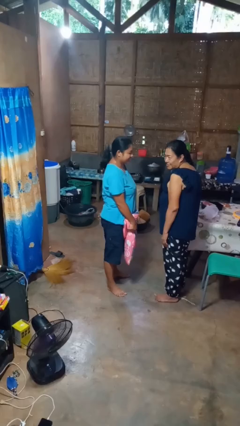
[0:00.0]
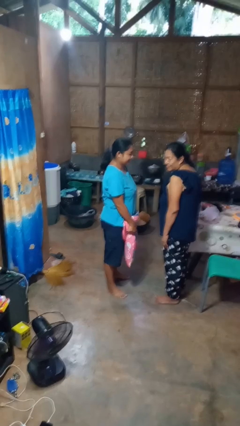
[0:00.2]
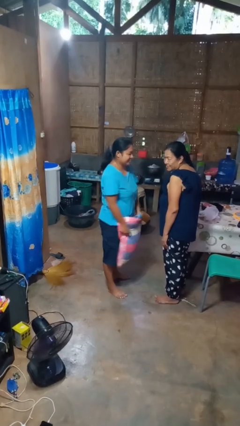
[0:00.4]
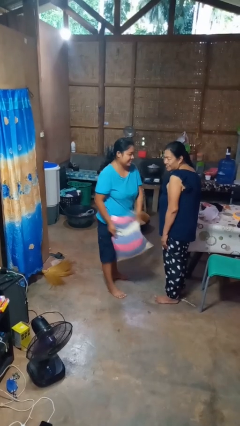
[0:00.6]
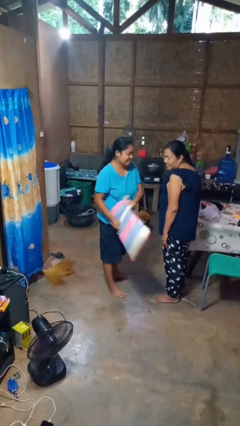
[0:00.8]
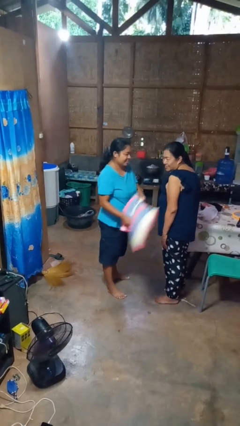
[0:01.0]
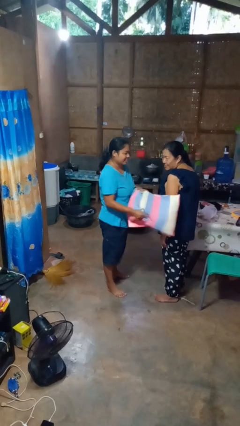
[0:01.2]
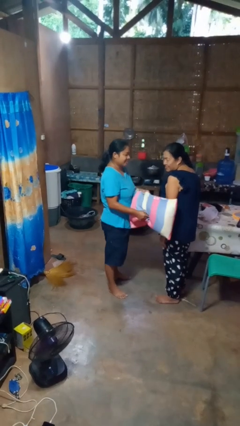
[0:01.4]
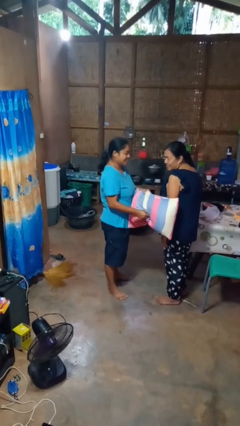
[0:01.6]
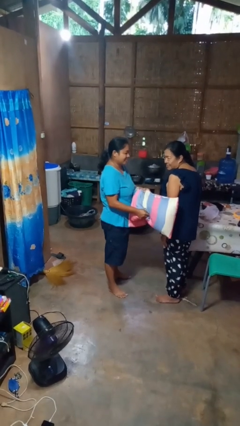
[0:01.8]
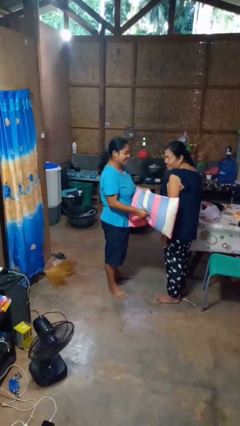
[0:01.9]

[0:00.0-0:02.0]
person hits person with pillow

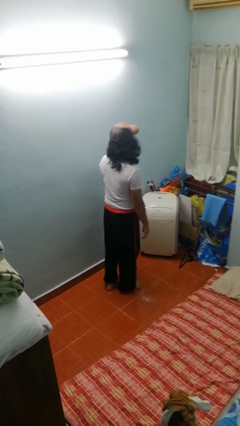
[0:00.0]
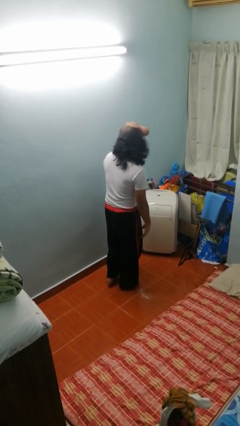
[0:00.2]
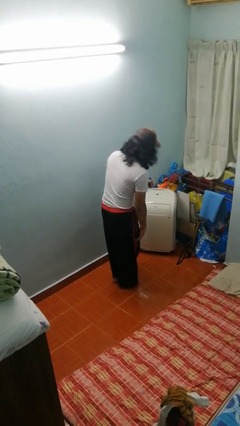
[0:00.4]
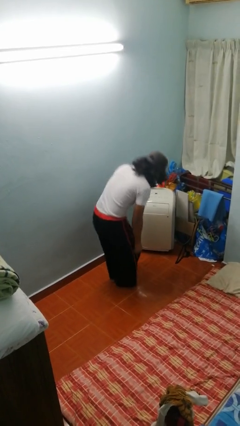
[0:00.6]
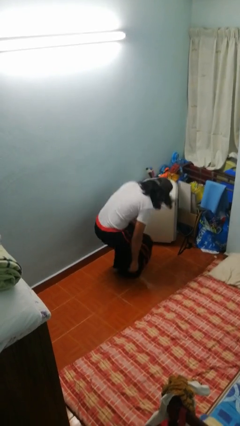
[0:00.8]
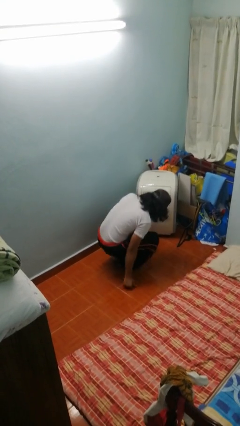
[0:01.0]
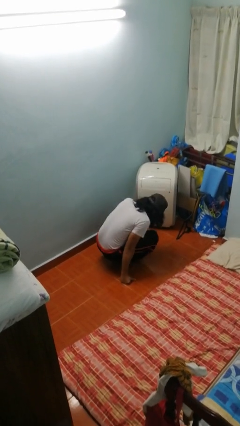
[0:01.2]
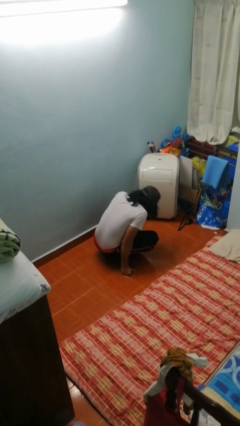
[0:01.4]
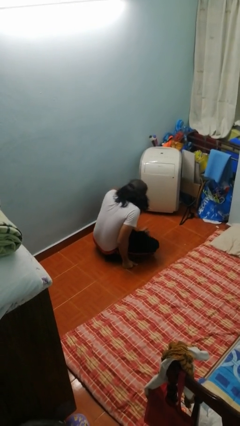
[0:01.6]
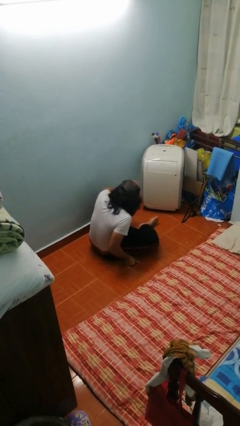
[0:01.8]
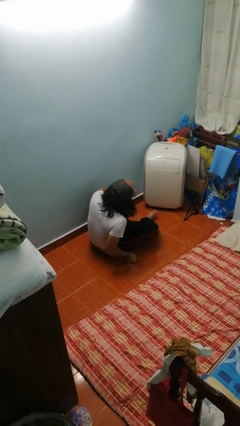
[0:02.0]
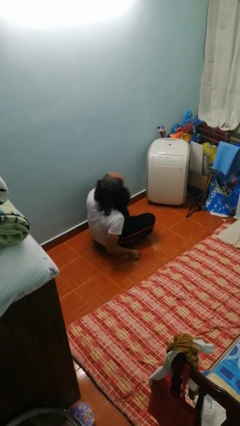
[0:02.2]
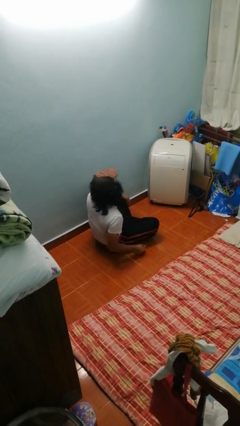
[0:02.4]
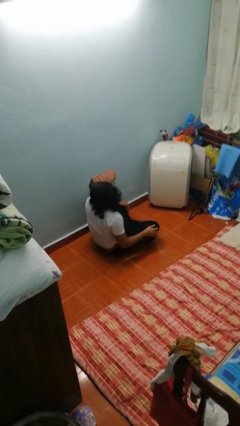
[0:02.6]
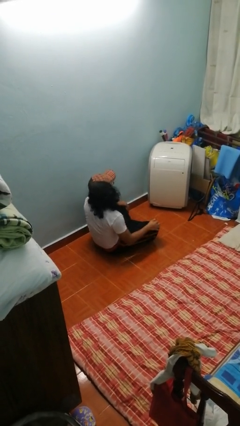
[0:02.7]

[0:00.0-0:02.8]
person sits crisscross

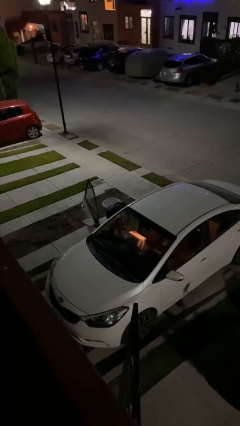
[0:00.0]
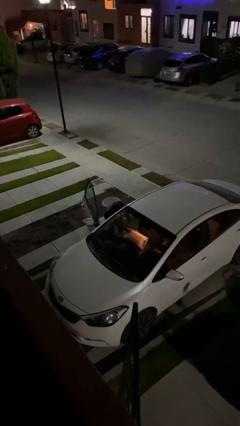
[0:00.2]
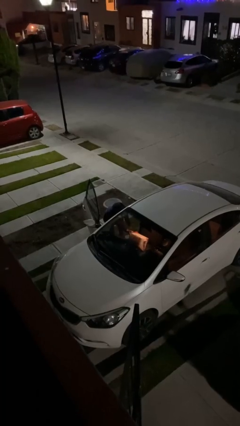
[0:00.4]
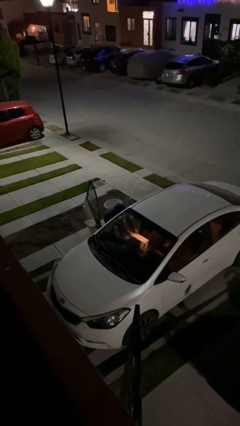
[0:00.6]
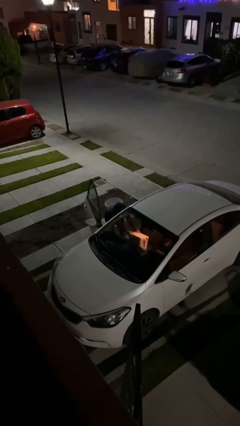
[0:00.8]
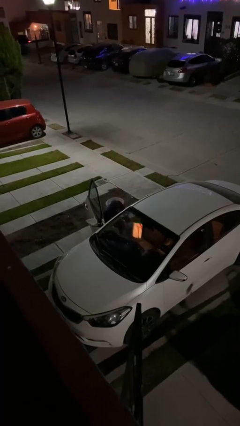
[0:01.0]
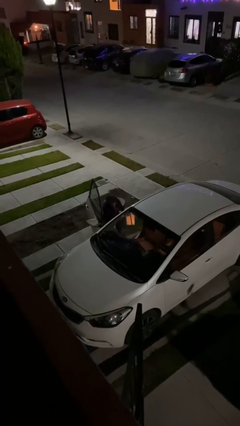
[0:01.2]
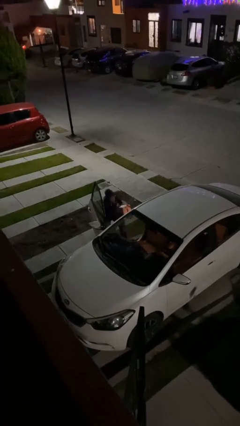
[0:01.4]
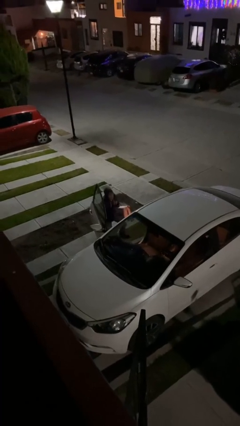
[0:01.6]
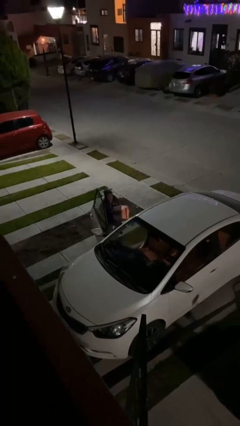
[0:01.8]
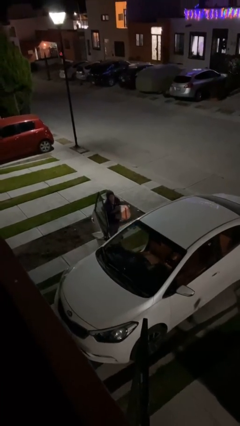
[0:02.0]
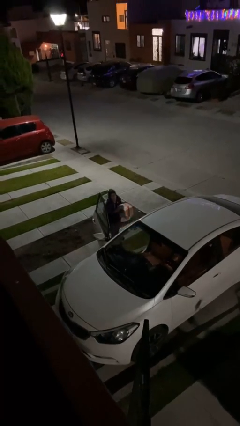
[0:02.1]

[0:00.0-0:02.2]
person unloads car

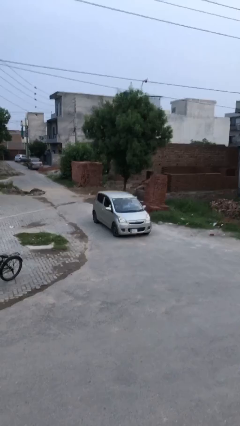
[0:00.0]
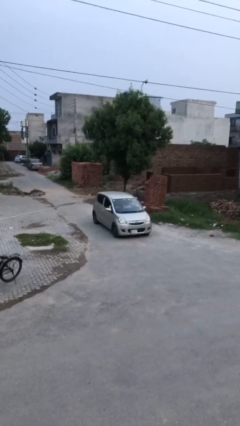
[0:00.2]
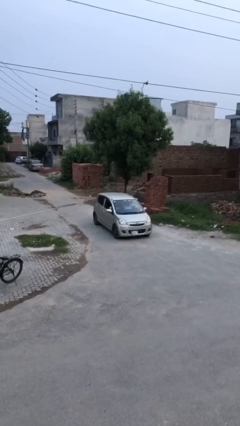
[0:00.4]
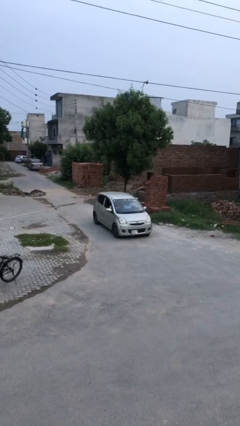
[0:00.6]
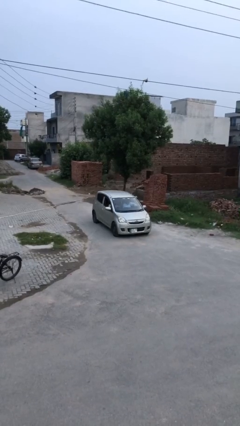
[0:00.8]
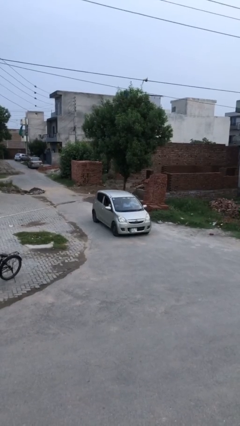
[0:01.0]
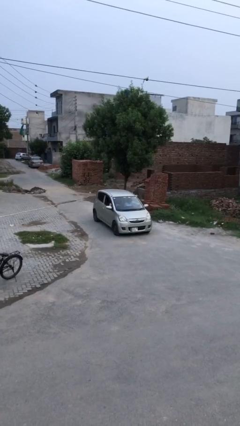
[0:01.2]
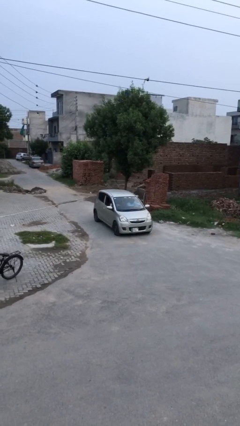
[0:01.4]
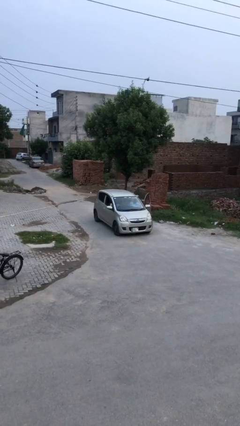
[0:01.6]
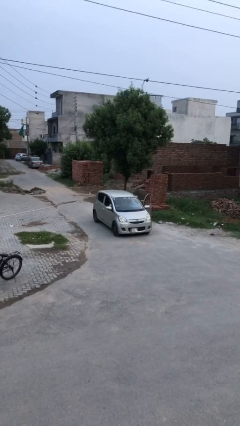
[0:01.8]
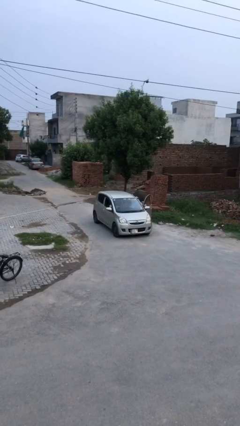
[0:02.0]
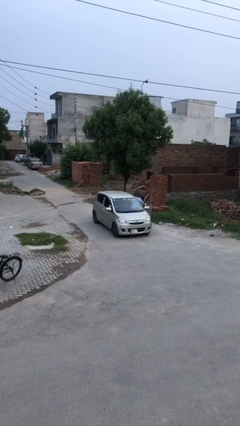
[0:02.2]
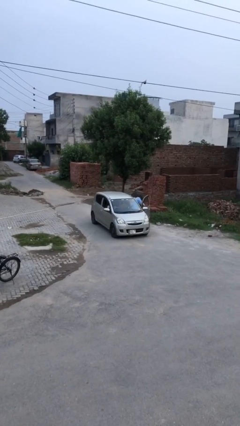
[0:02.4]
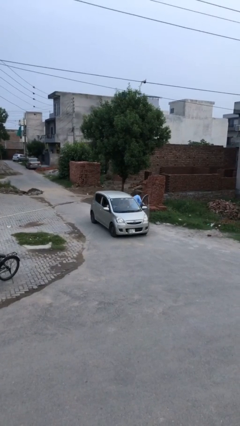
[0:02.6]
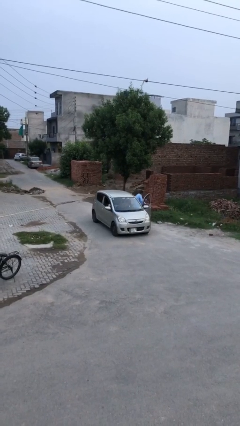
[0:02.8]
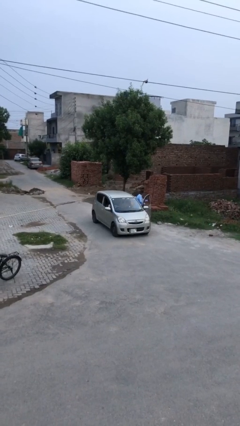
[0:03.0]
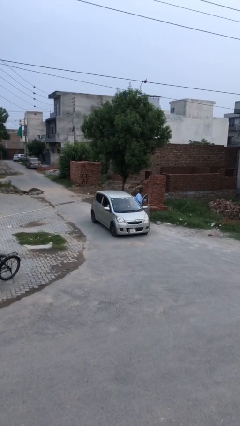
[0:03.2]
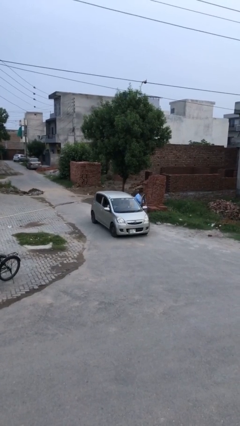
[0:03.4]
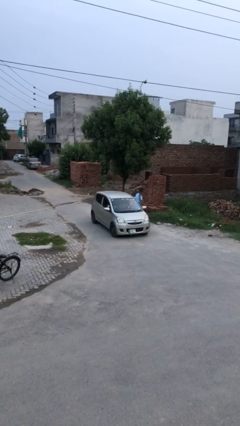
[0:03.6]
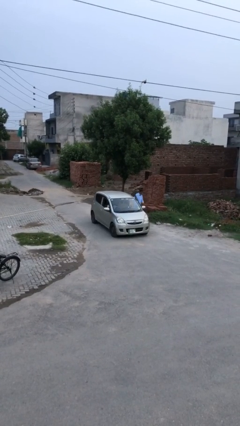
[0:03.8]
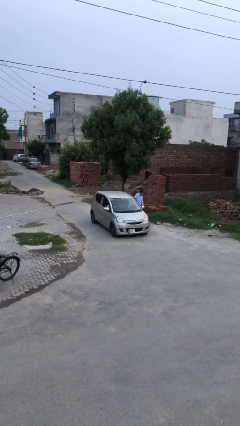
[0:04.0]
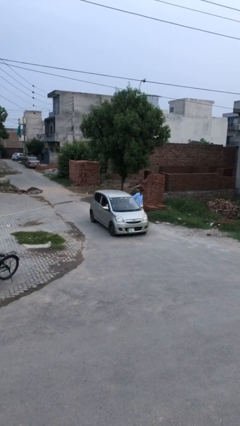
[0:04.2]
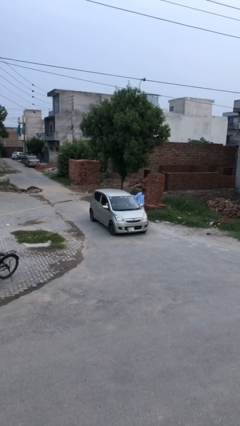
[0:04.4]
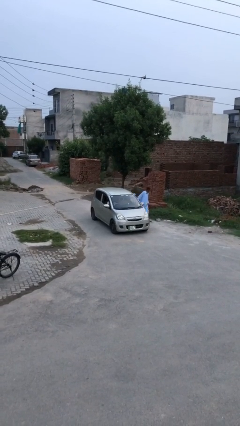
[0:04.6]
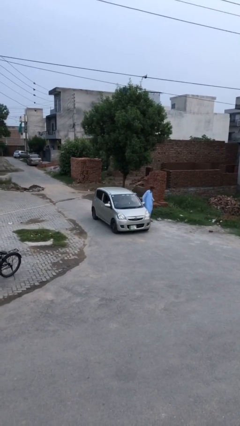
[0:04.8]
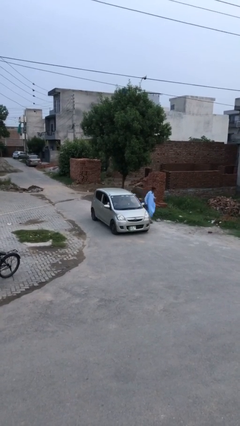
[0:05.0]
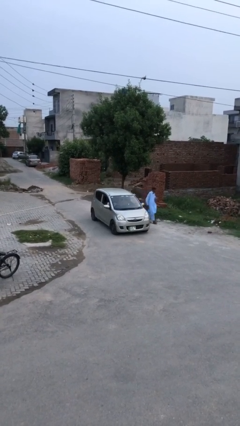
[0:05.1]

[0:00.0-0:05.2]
car drops off person

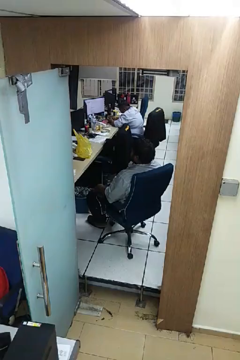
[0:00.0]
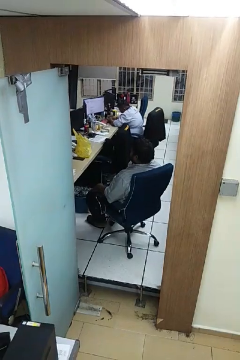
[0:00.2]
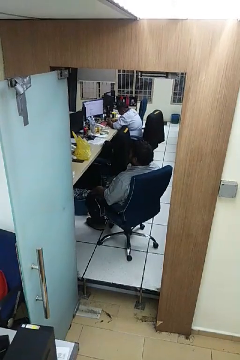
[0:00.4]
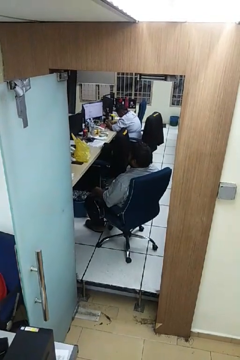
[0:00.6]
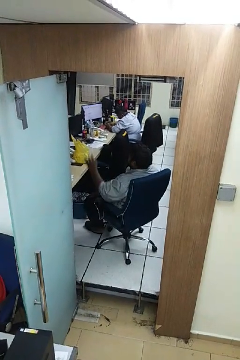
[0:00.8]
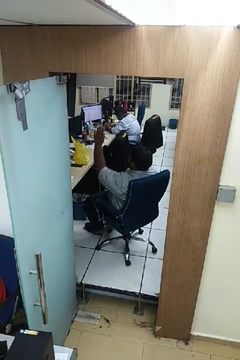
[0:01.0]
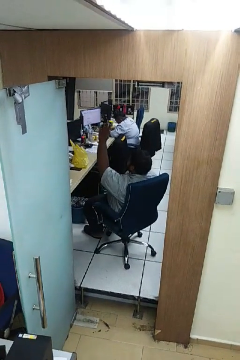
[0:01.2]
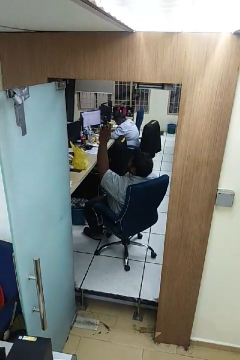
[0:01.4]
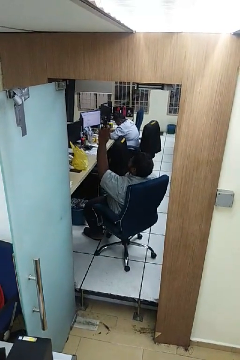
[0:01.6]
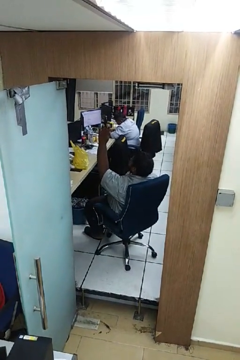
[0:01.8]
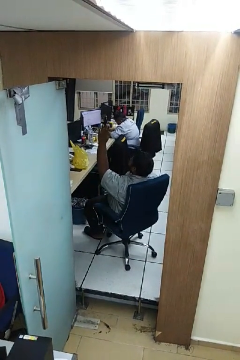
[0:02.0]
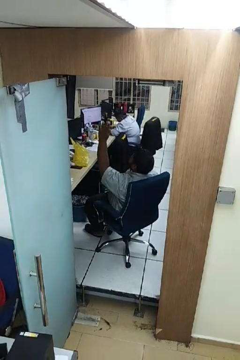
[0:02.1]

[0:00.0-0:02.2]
person gestures raise hand

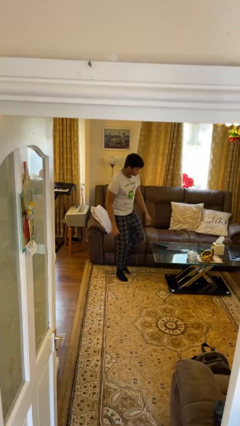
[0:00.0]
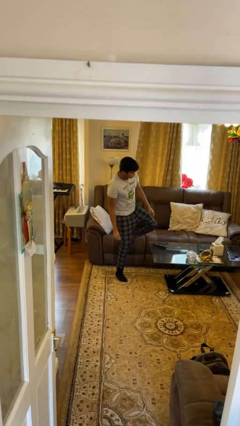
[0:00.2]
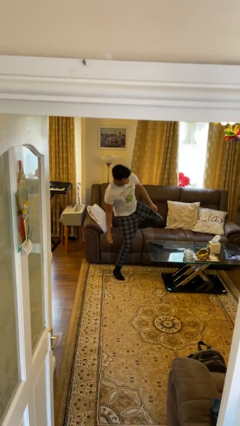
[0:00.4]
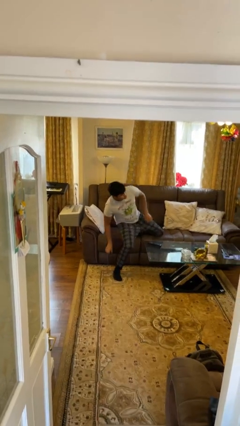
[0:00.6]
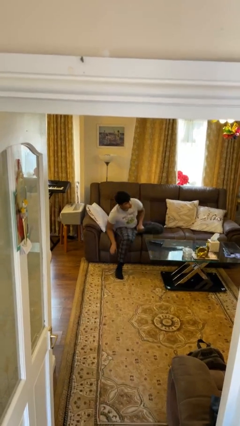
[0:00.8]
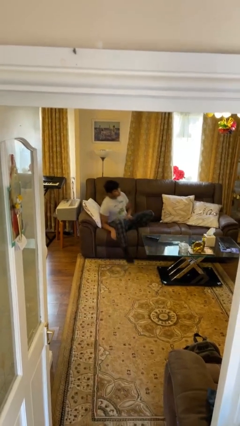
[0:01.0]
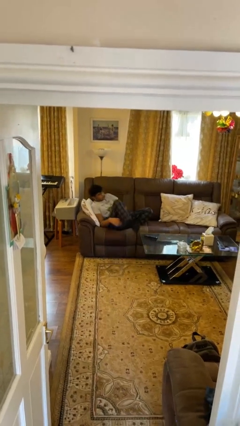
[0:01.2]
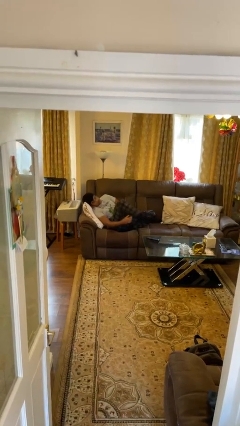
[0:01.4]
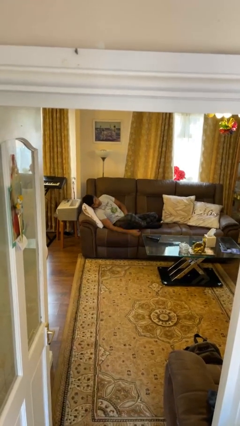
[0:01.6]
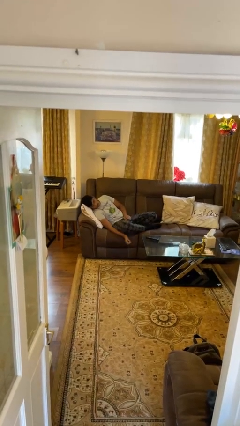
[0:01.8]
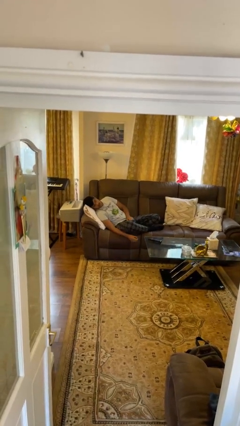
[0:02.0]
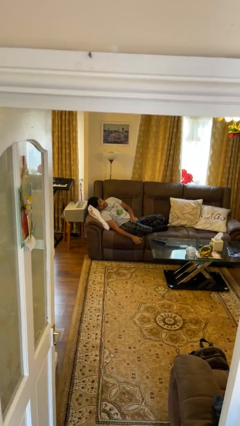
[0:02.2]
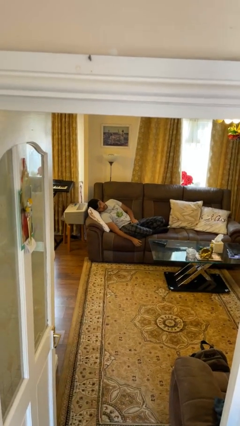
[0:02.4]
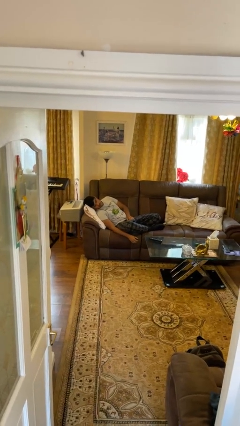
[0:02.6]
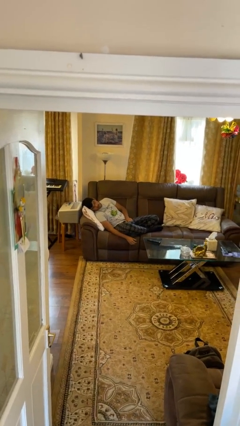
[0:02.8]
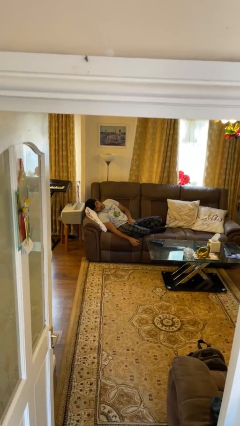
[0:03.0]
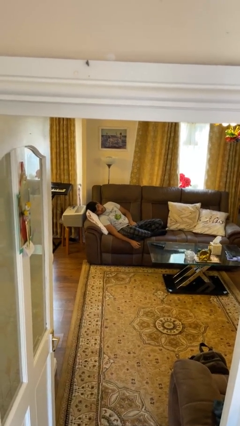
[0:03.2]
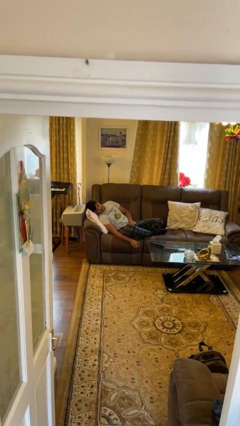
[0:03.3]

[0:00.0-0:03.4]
person lies down on couch
